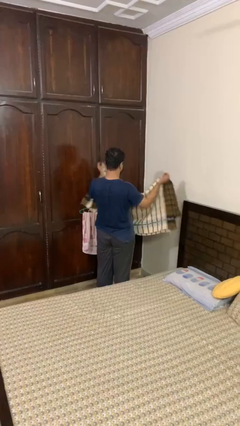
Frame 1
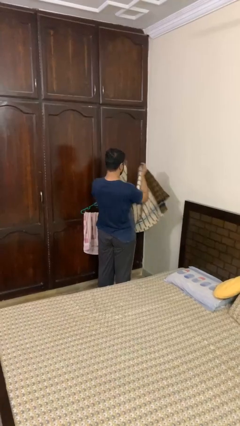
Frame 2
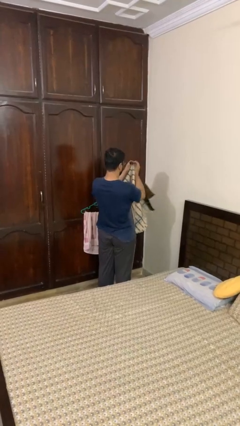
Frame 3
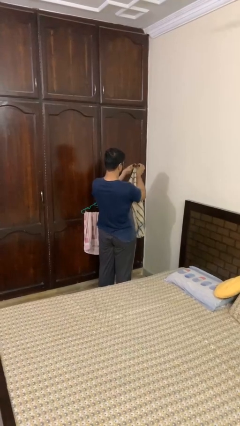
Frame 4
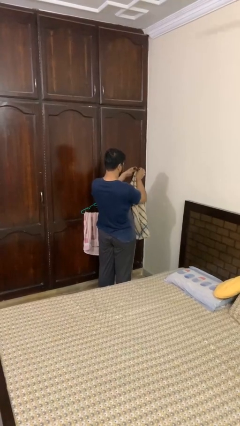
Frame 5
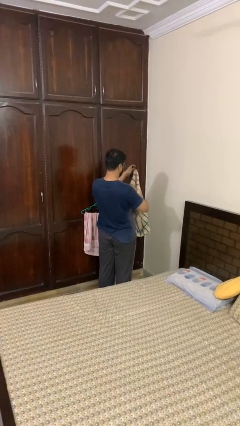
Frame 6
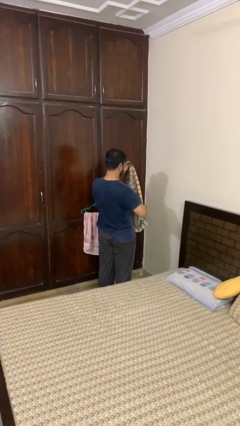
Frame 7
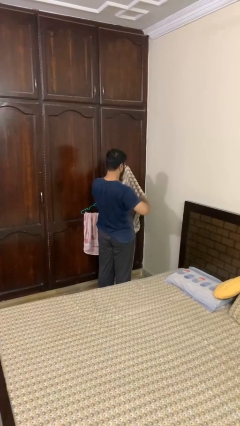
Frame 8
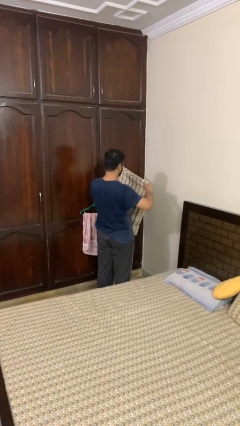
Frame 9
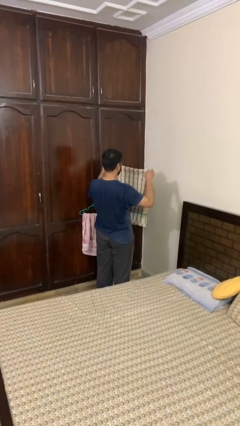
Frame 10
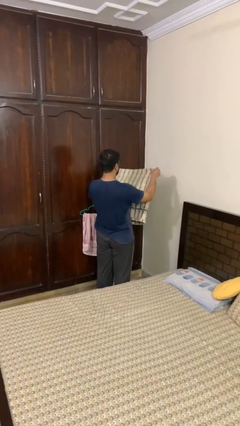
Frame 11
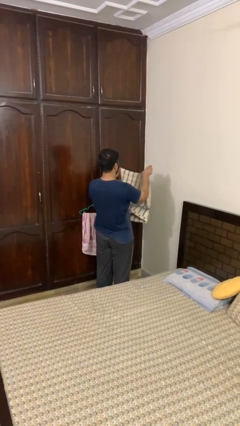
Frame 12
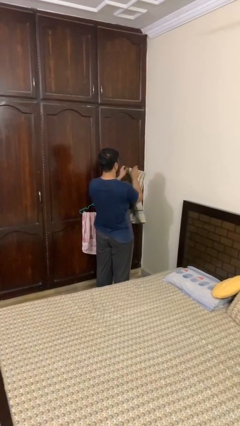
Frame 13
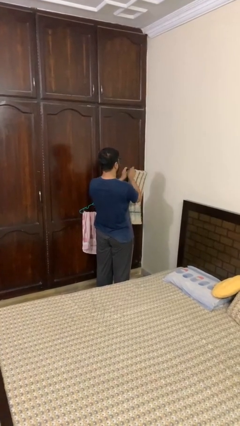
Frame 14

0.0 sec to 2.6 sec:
person folds blanket

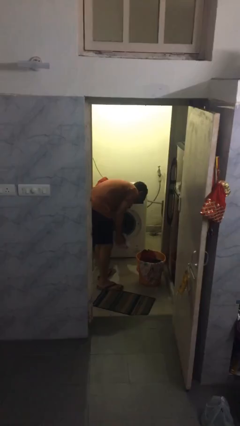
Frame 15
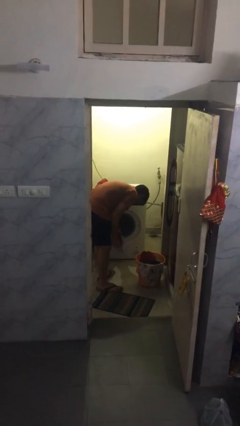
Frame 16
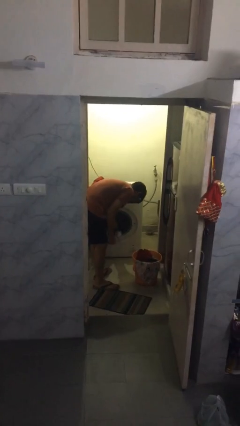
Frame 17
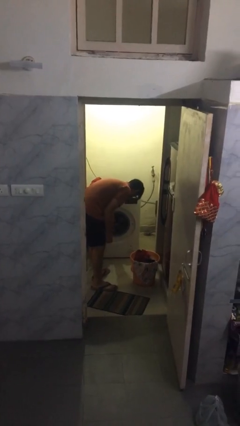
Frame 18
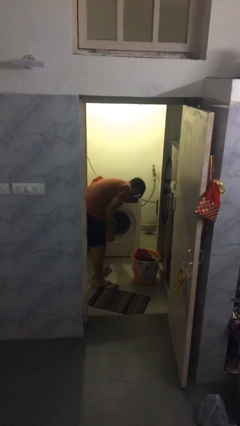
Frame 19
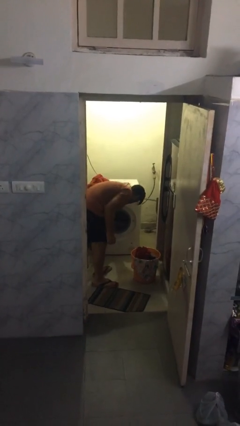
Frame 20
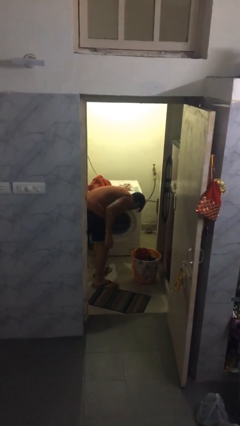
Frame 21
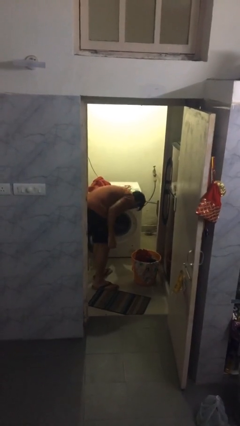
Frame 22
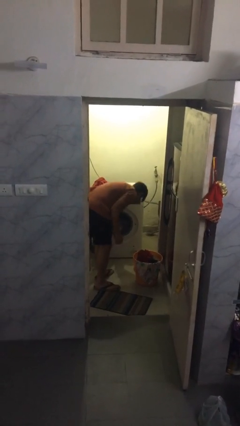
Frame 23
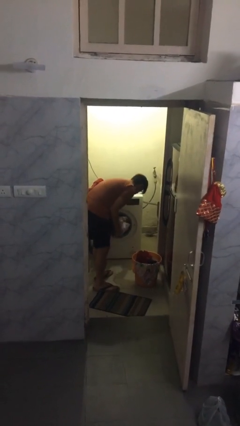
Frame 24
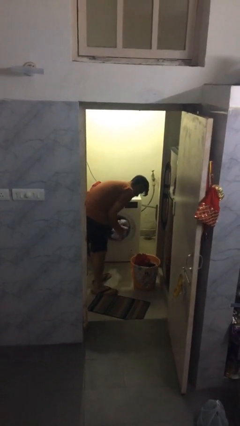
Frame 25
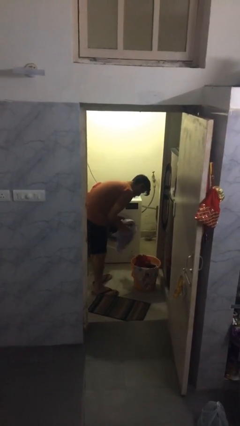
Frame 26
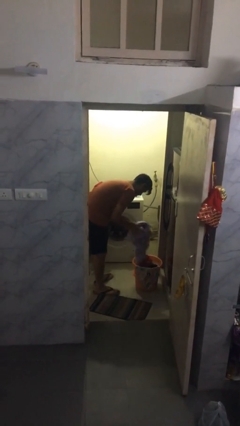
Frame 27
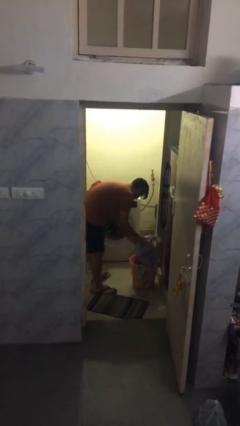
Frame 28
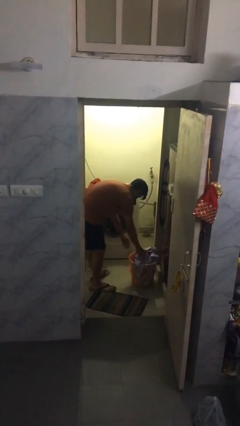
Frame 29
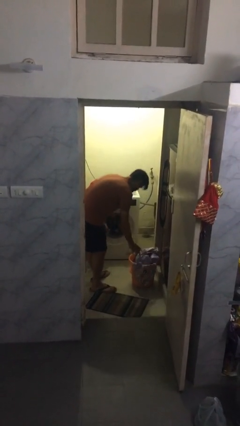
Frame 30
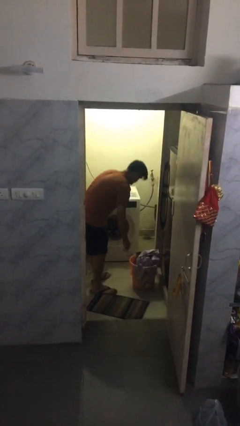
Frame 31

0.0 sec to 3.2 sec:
person unloads dryer

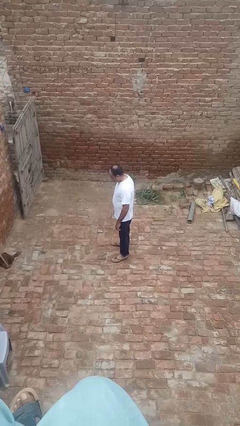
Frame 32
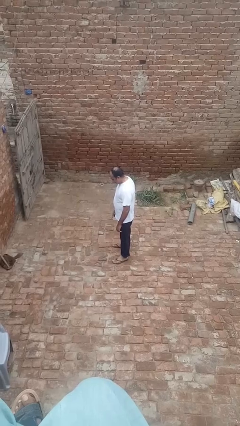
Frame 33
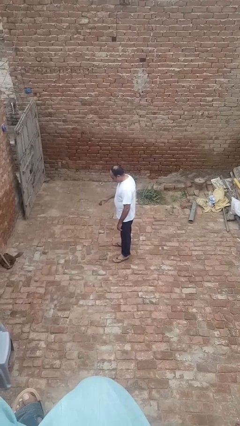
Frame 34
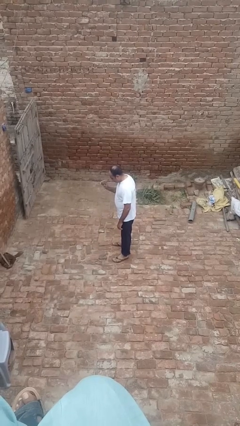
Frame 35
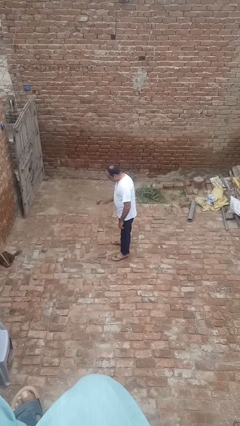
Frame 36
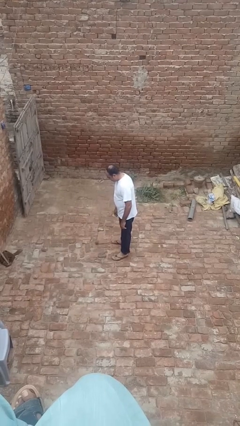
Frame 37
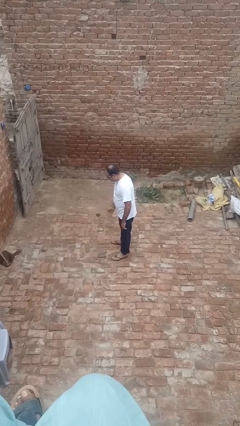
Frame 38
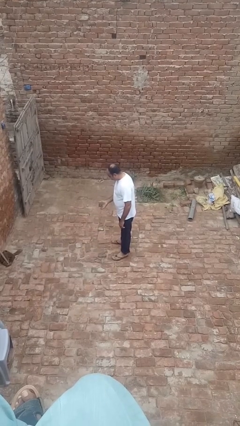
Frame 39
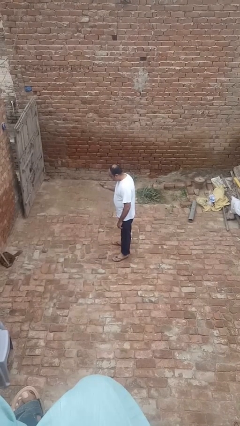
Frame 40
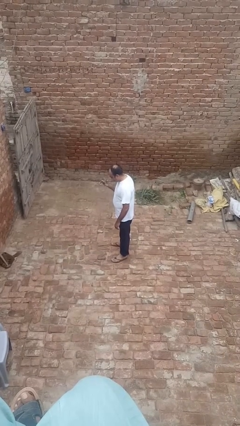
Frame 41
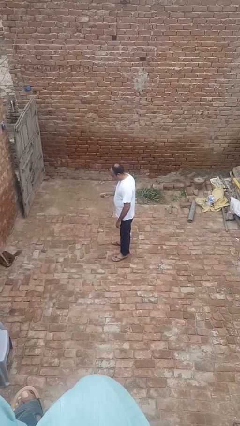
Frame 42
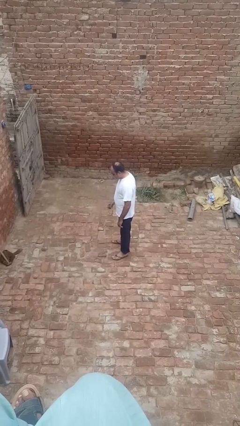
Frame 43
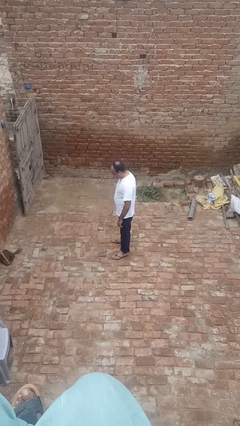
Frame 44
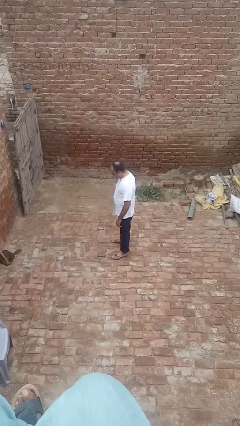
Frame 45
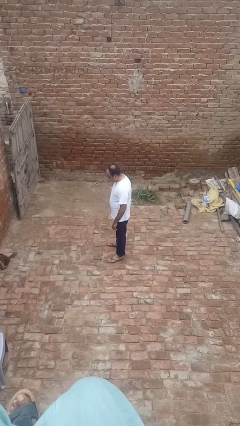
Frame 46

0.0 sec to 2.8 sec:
person bounces ball on floor

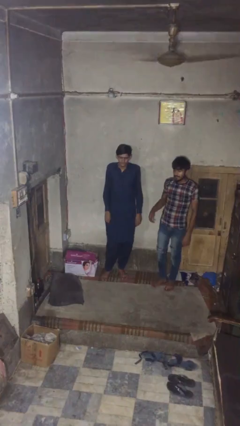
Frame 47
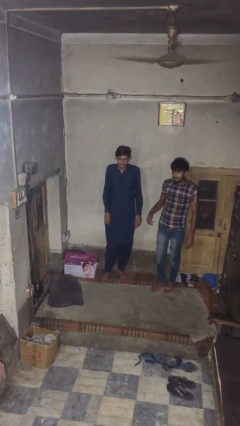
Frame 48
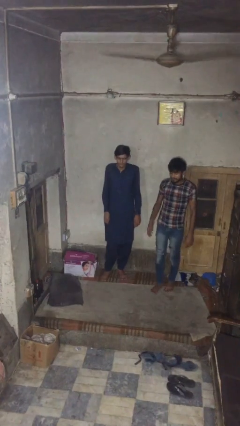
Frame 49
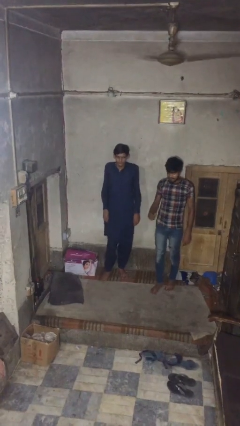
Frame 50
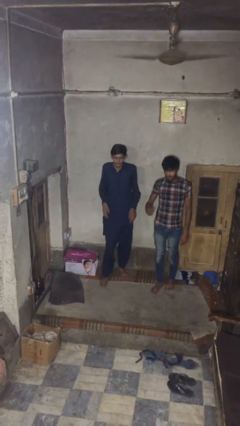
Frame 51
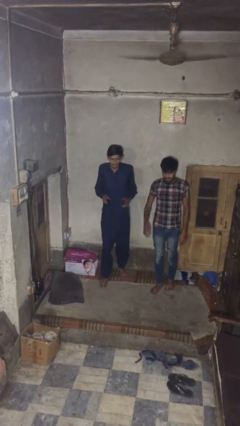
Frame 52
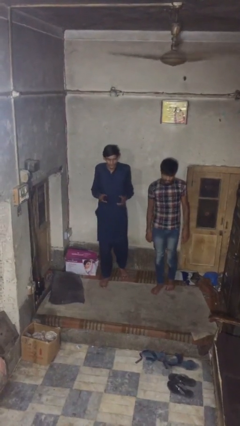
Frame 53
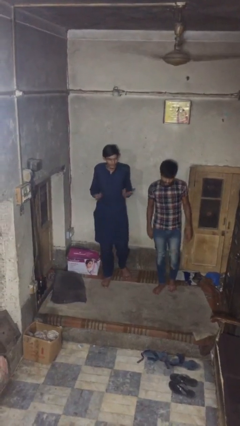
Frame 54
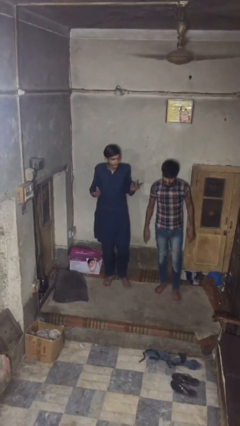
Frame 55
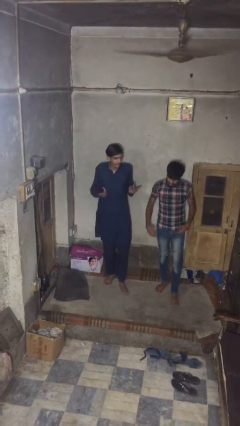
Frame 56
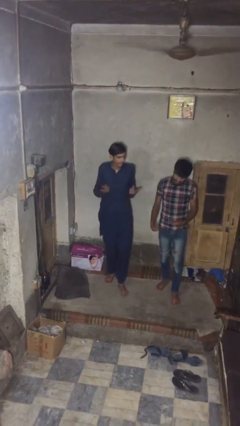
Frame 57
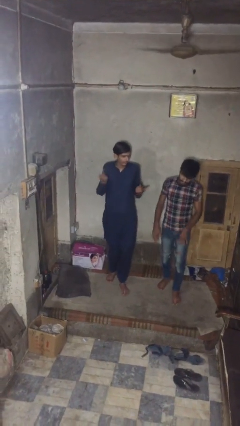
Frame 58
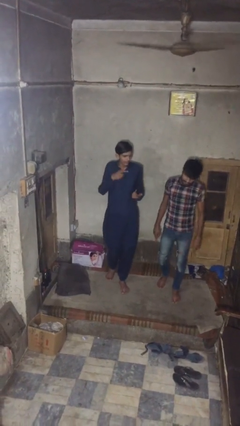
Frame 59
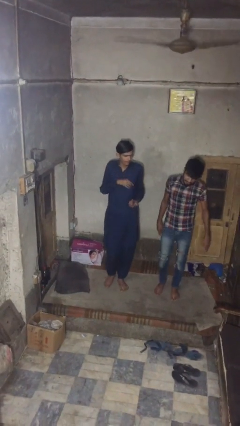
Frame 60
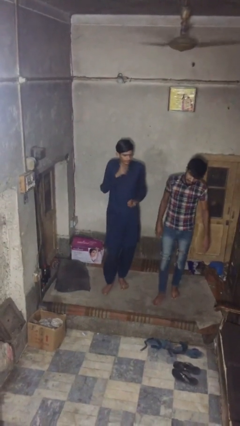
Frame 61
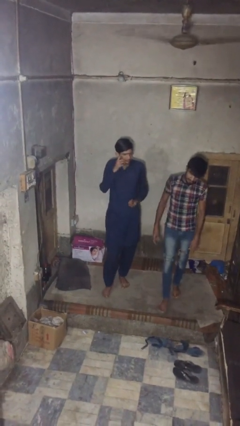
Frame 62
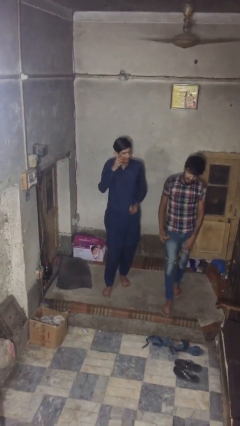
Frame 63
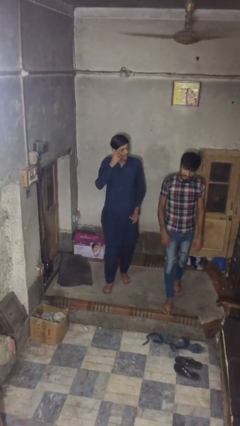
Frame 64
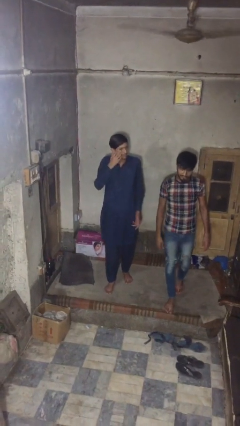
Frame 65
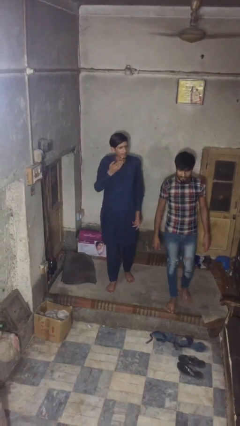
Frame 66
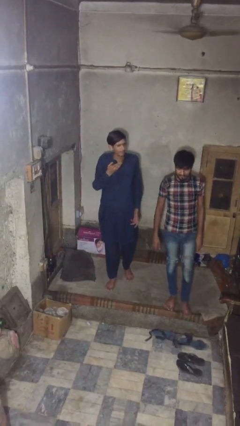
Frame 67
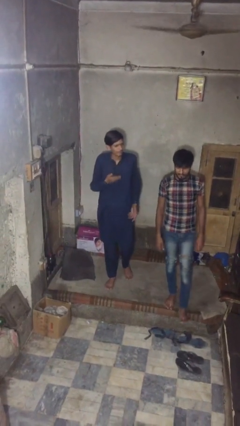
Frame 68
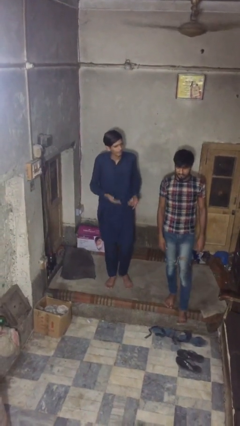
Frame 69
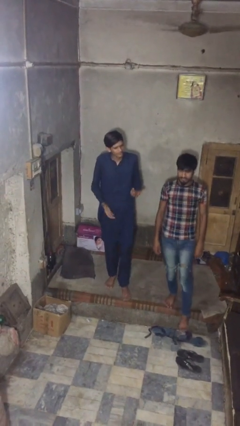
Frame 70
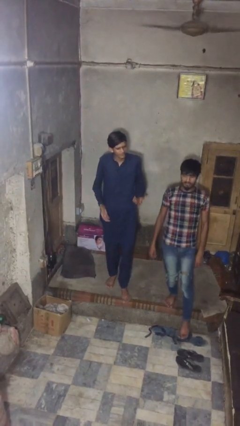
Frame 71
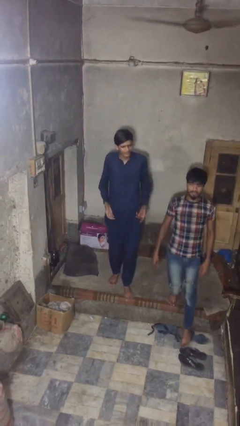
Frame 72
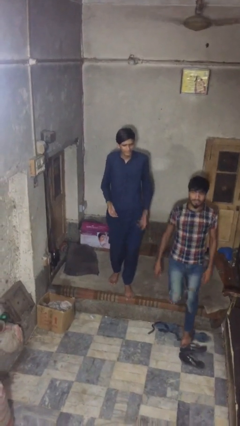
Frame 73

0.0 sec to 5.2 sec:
person talks to person

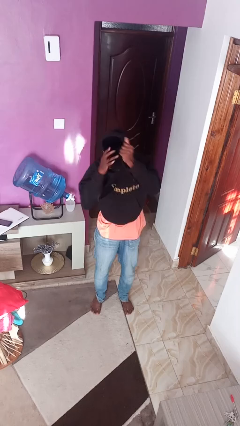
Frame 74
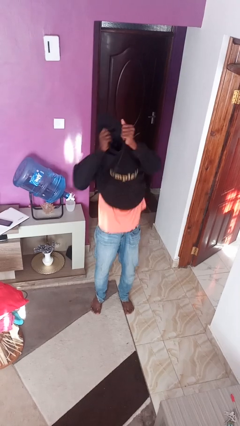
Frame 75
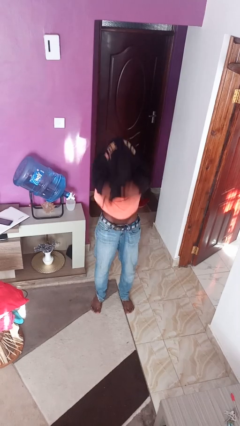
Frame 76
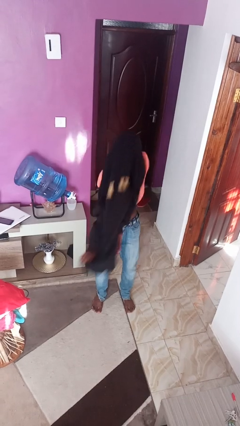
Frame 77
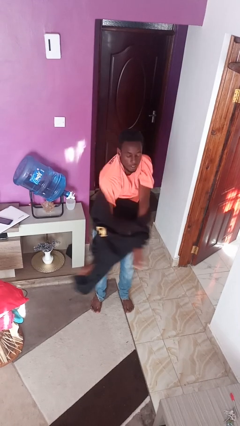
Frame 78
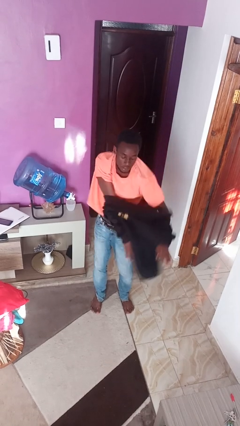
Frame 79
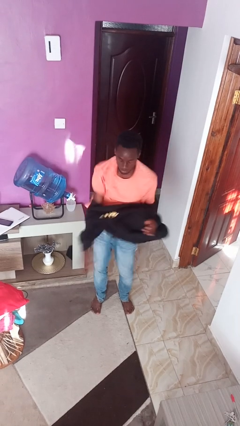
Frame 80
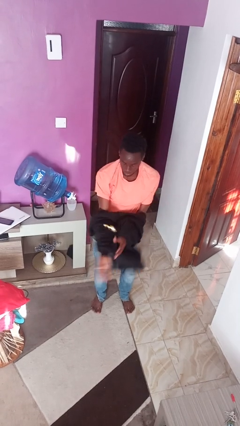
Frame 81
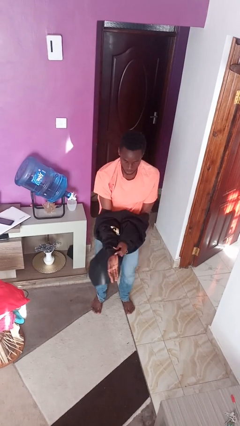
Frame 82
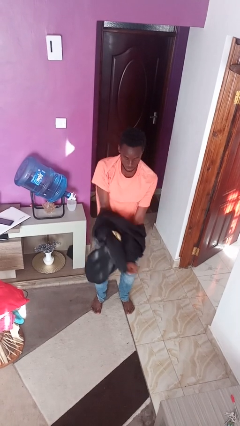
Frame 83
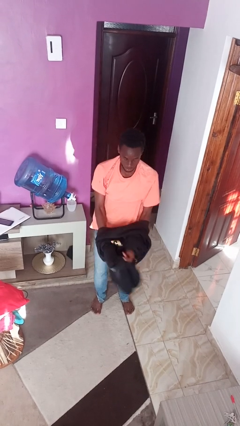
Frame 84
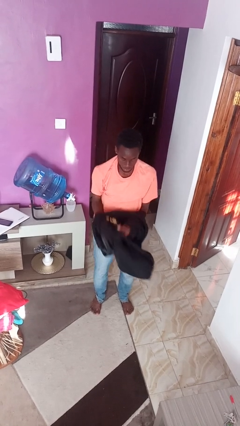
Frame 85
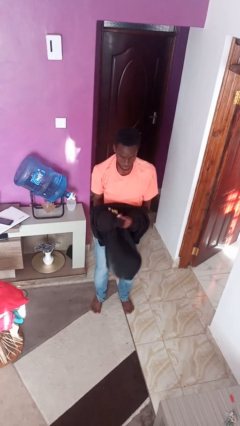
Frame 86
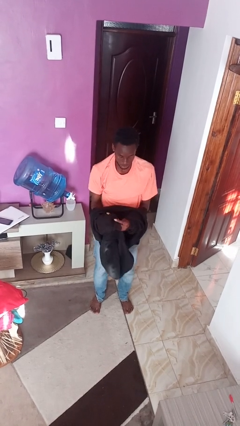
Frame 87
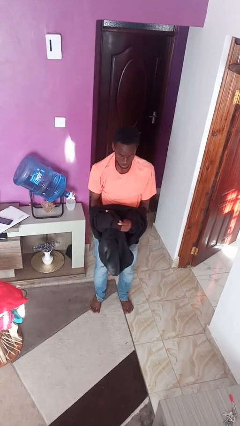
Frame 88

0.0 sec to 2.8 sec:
person shoves person

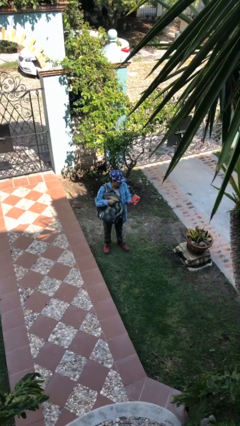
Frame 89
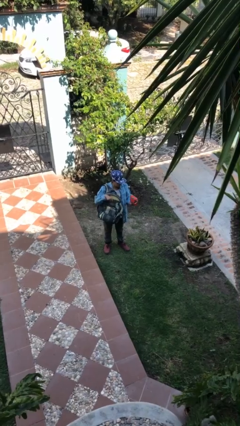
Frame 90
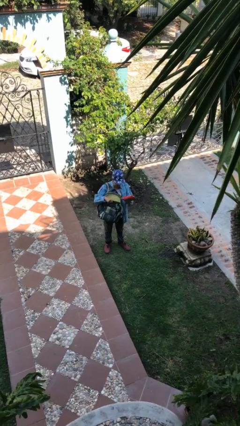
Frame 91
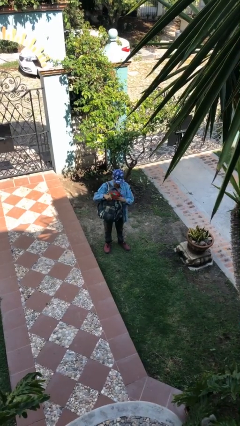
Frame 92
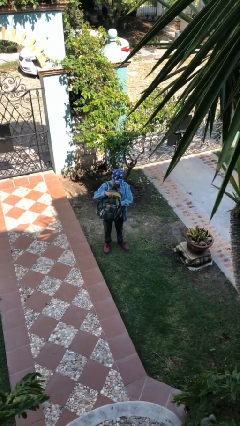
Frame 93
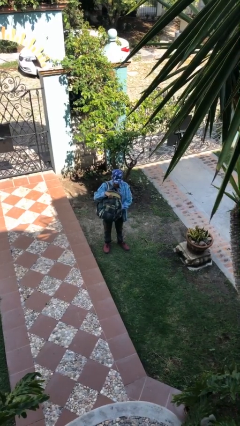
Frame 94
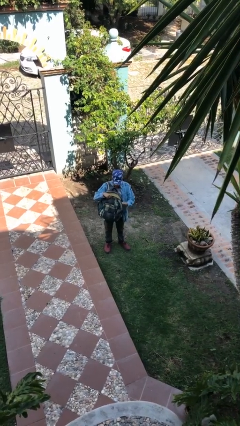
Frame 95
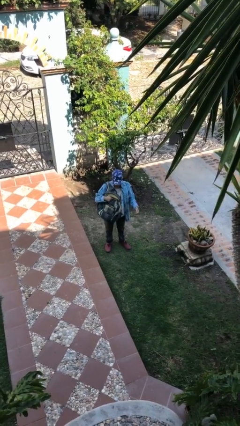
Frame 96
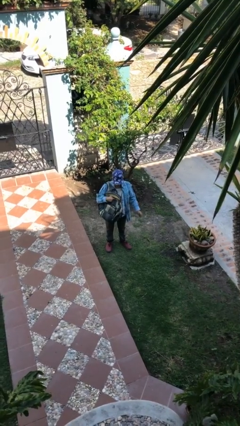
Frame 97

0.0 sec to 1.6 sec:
person puts object into backpack
